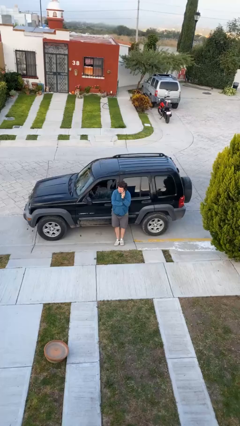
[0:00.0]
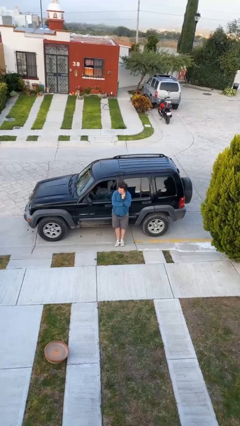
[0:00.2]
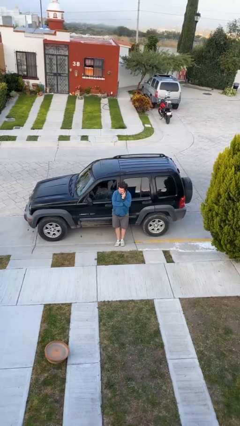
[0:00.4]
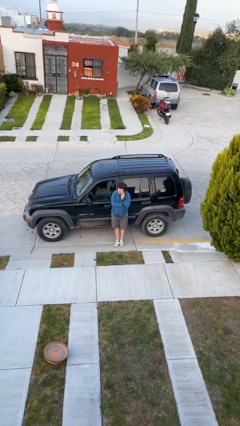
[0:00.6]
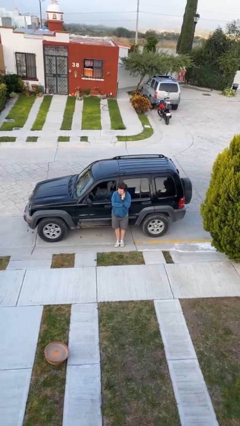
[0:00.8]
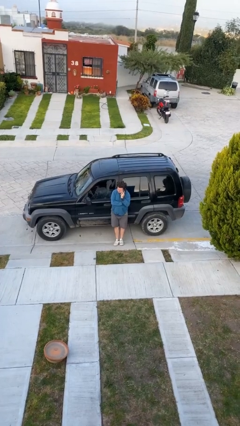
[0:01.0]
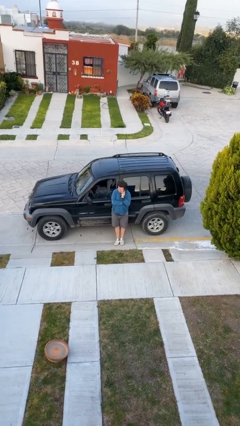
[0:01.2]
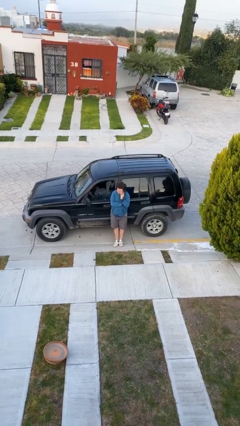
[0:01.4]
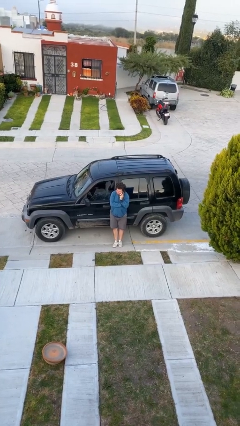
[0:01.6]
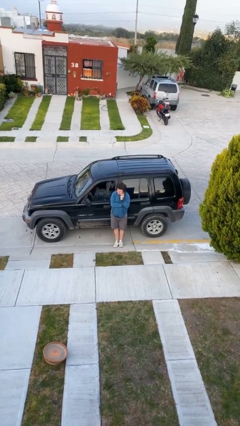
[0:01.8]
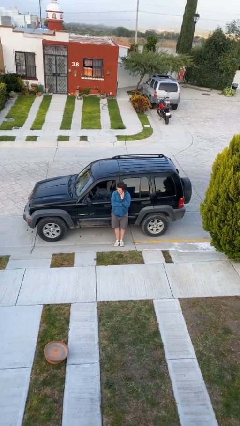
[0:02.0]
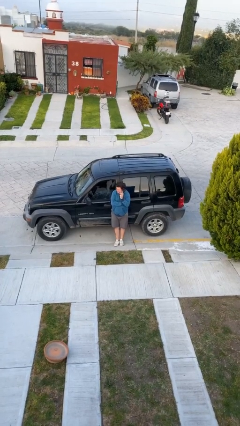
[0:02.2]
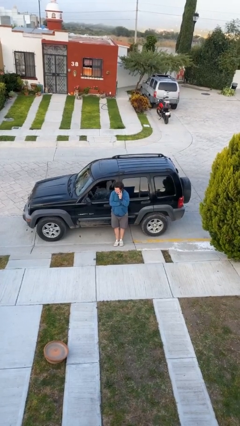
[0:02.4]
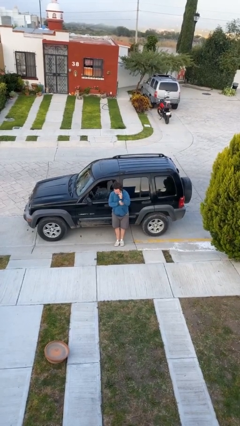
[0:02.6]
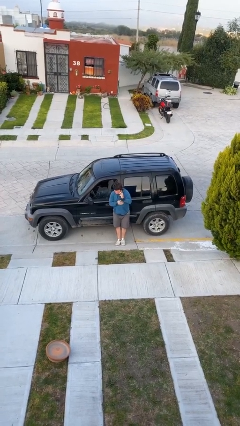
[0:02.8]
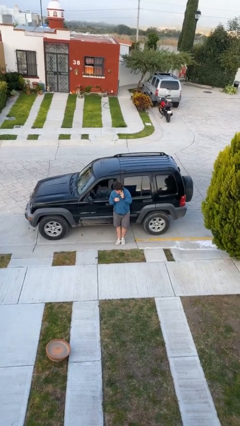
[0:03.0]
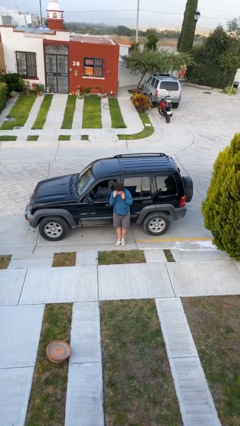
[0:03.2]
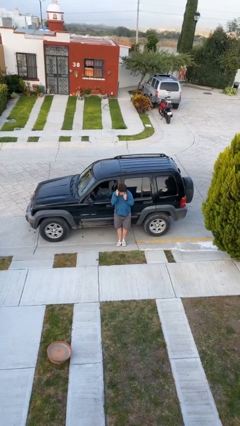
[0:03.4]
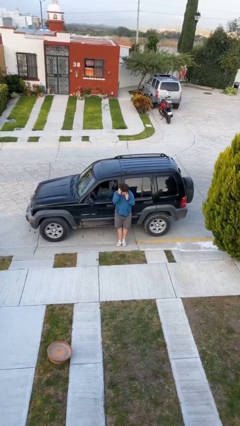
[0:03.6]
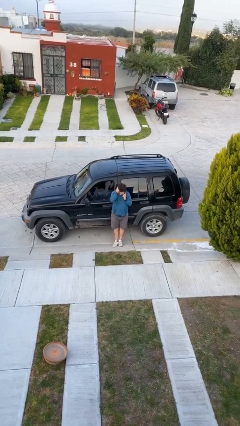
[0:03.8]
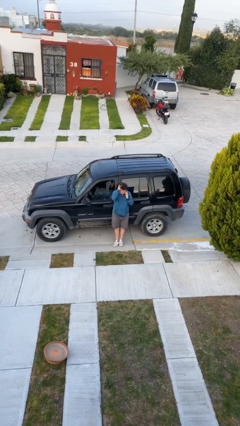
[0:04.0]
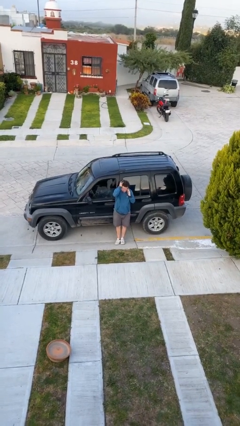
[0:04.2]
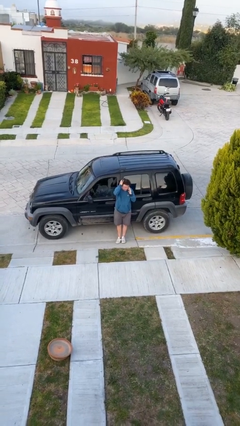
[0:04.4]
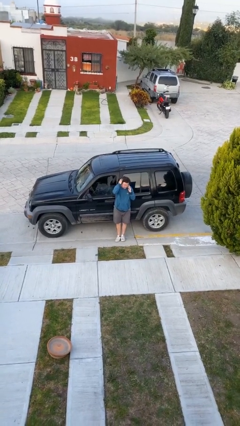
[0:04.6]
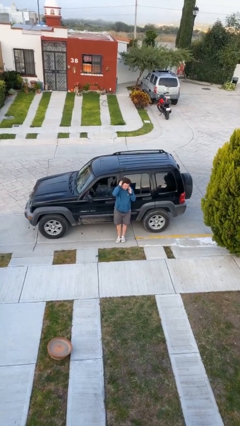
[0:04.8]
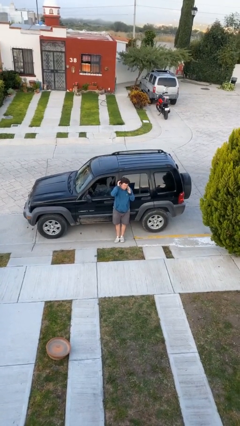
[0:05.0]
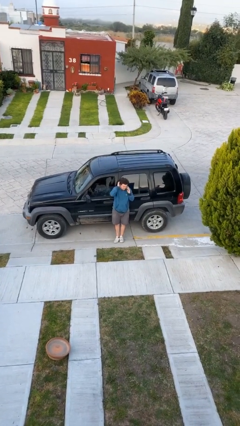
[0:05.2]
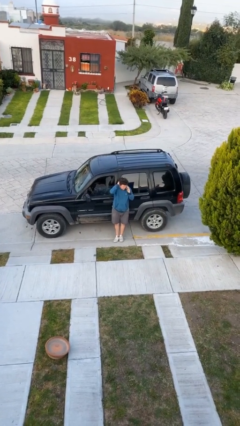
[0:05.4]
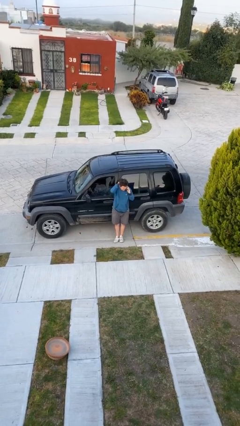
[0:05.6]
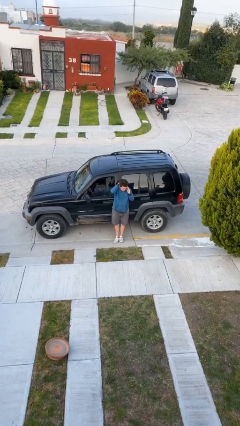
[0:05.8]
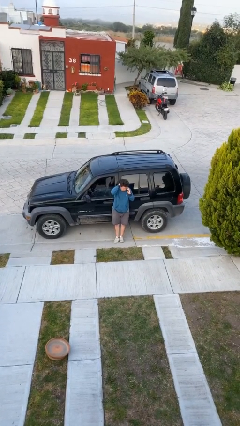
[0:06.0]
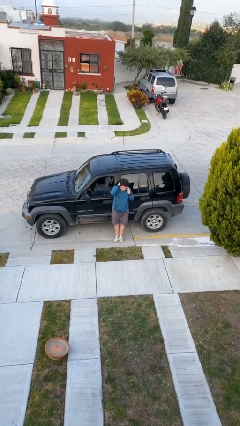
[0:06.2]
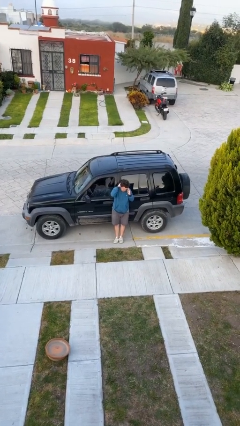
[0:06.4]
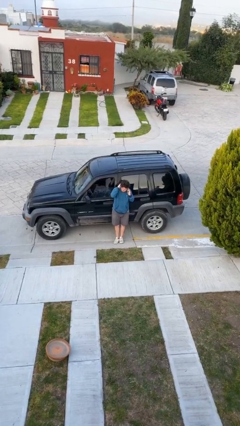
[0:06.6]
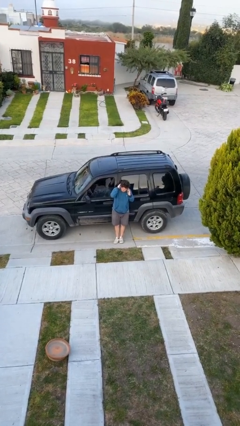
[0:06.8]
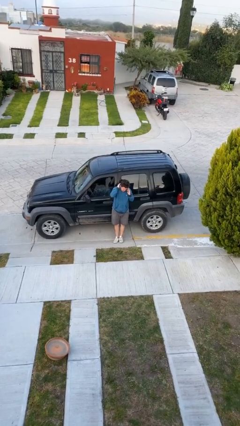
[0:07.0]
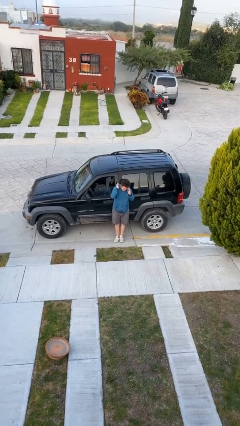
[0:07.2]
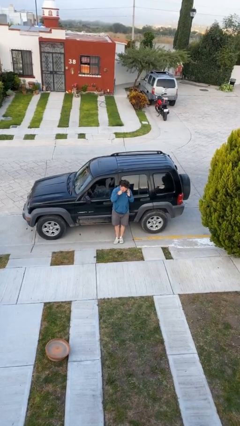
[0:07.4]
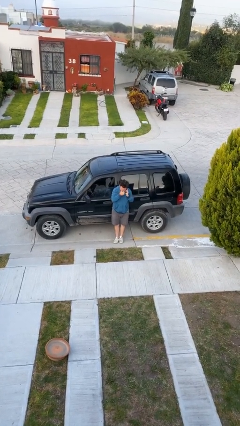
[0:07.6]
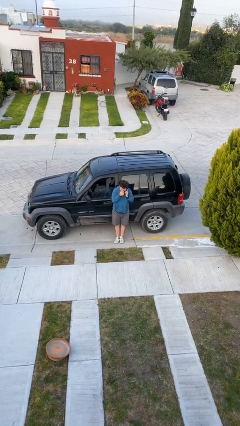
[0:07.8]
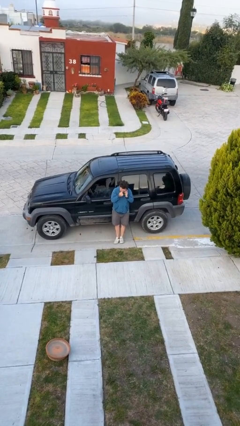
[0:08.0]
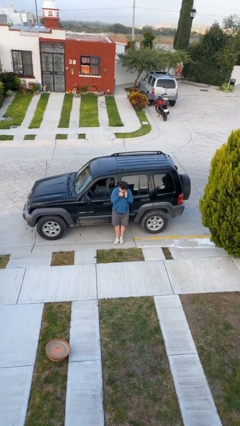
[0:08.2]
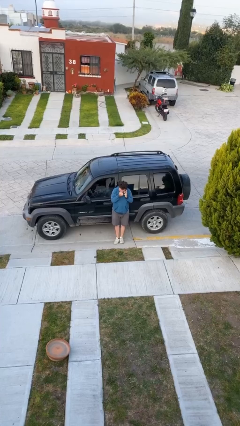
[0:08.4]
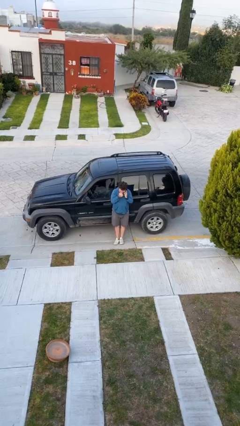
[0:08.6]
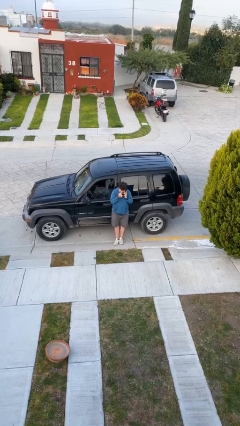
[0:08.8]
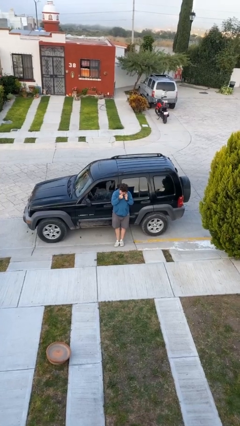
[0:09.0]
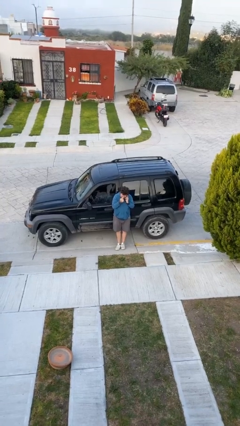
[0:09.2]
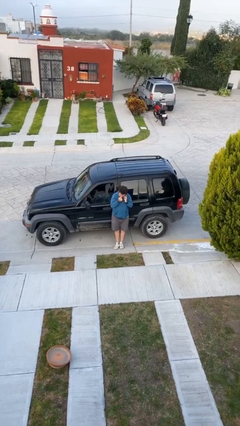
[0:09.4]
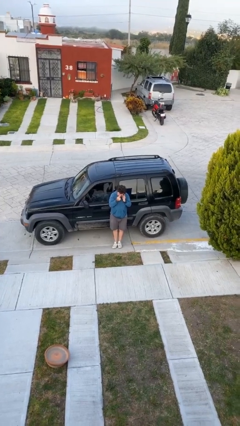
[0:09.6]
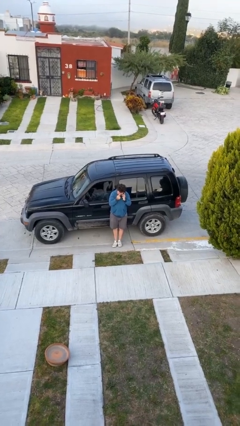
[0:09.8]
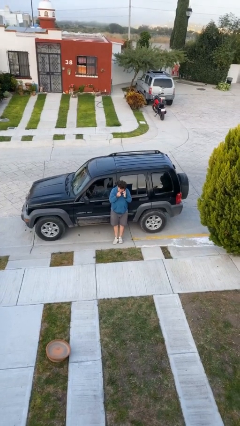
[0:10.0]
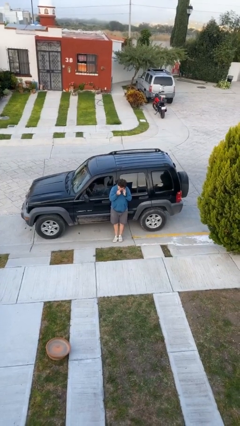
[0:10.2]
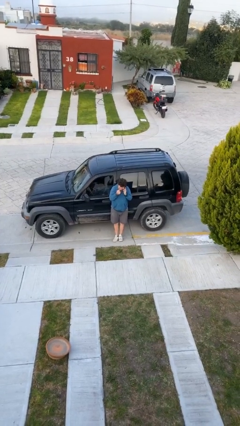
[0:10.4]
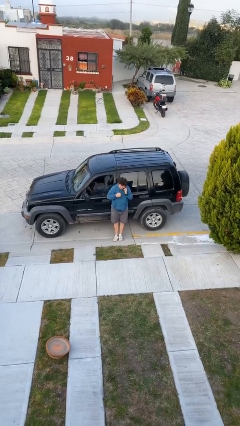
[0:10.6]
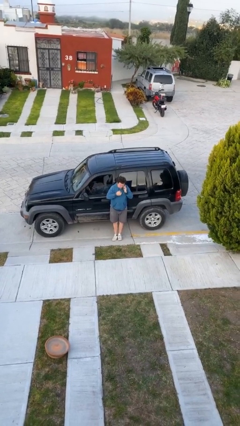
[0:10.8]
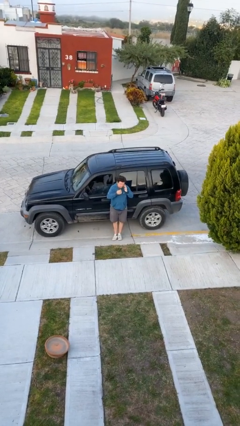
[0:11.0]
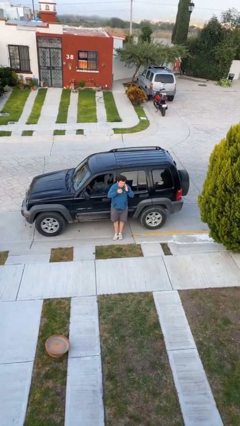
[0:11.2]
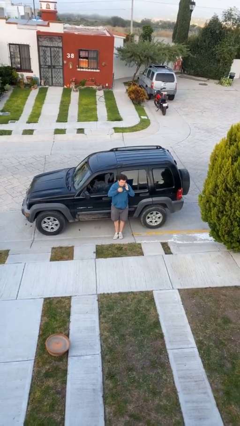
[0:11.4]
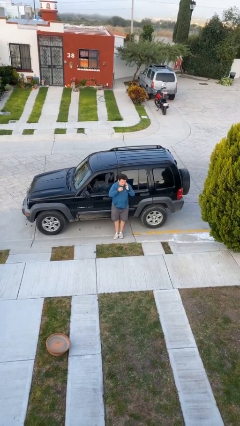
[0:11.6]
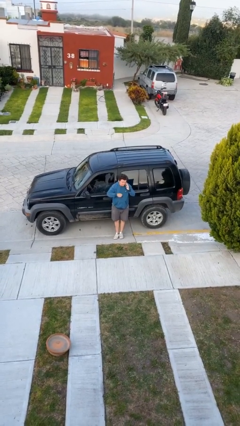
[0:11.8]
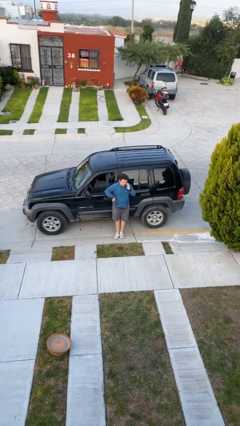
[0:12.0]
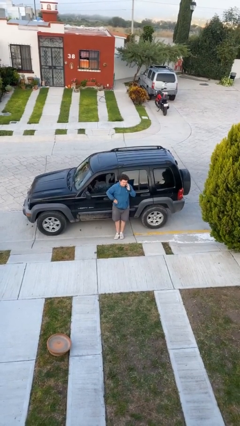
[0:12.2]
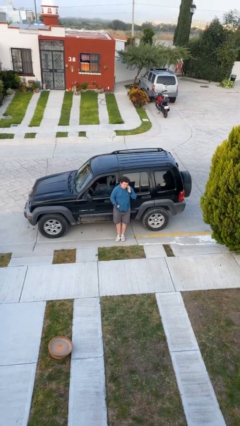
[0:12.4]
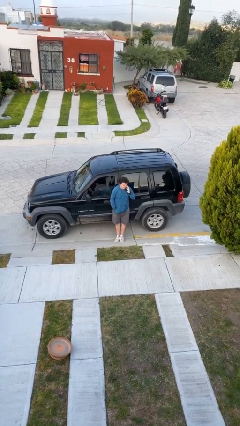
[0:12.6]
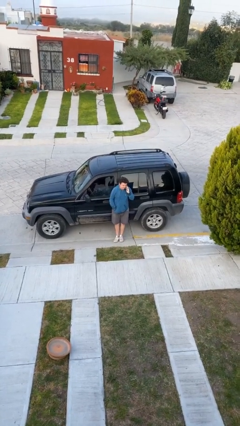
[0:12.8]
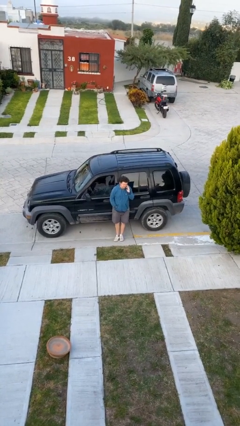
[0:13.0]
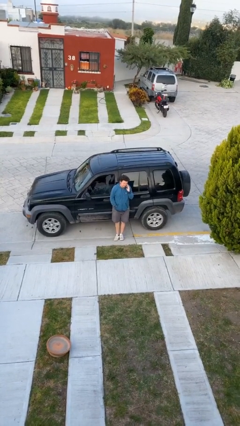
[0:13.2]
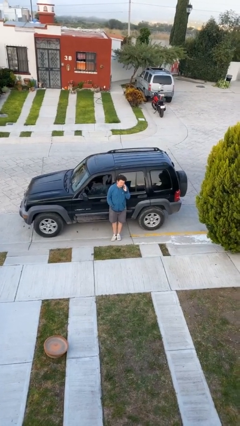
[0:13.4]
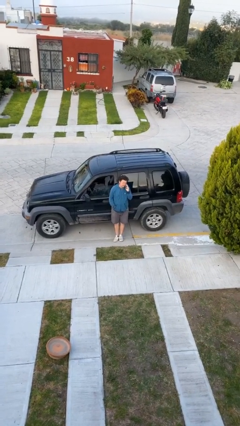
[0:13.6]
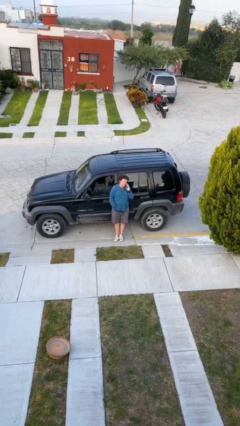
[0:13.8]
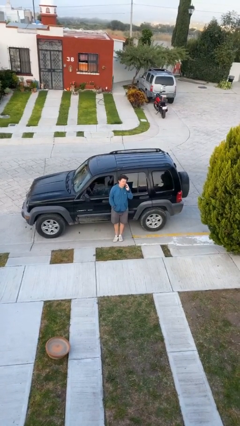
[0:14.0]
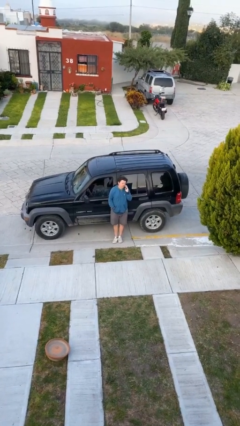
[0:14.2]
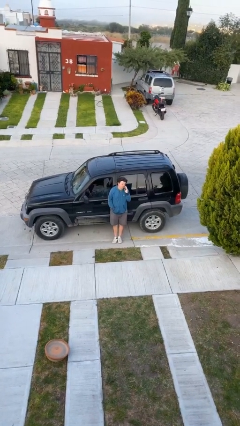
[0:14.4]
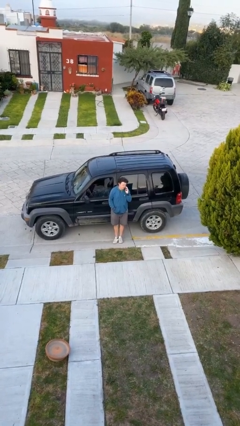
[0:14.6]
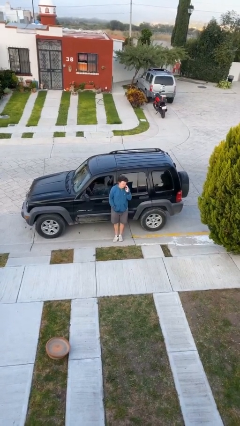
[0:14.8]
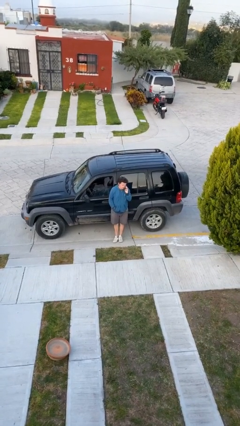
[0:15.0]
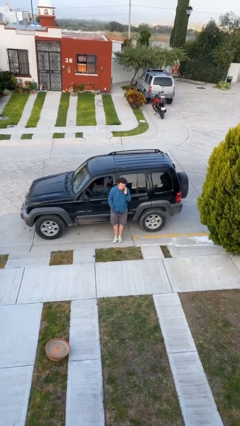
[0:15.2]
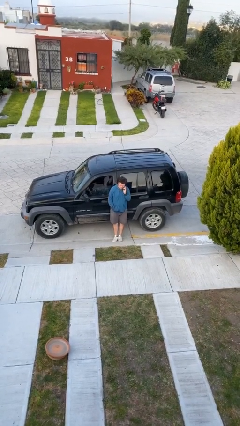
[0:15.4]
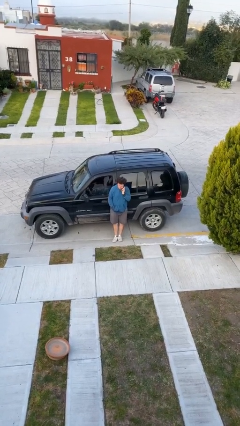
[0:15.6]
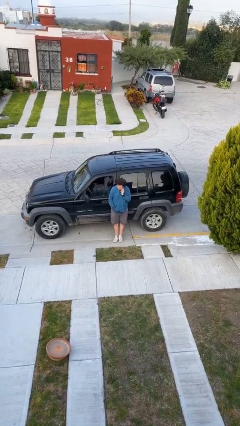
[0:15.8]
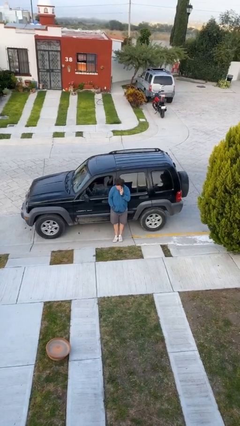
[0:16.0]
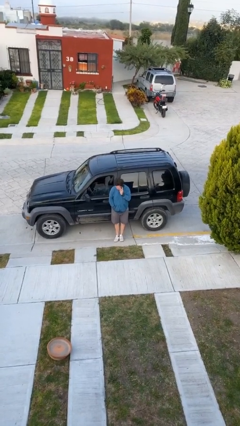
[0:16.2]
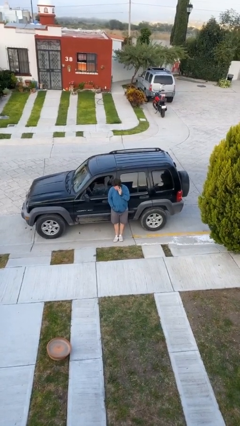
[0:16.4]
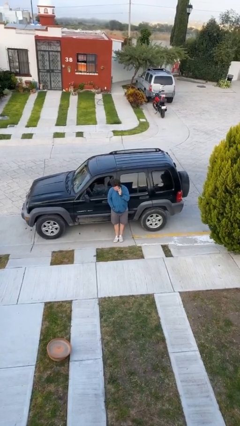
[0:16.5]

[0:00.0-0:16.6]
person talks on phone

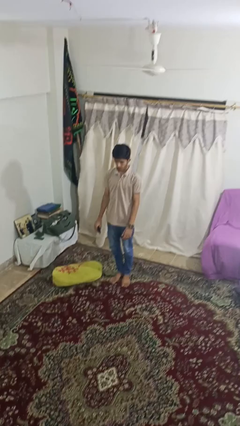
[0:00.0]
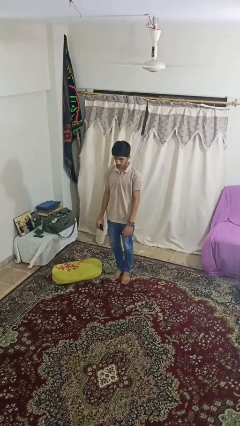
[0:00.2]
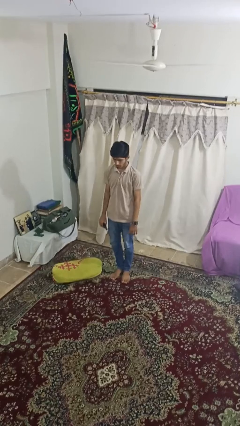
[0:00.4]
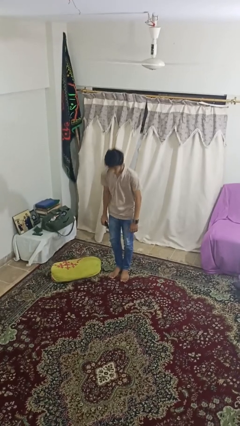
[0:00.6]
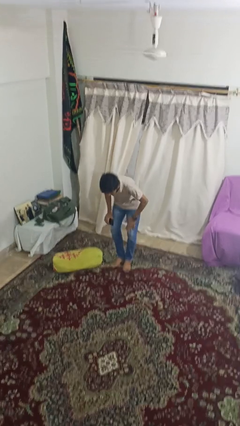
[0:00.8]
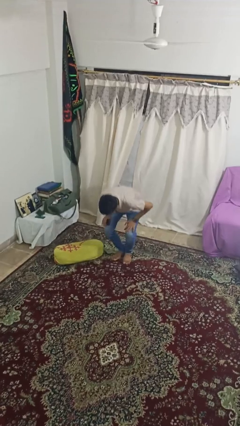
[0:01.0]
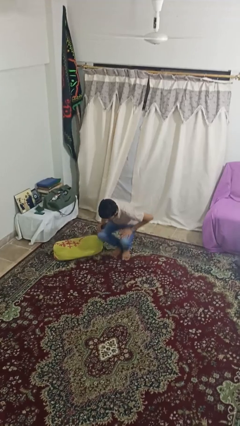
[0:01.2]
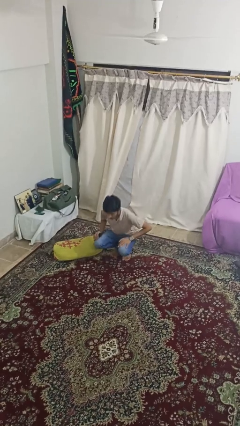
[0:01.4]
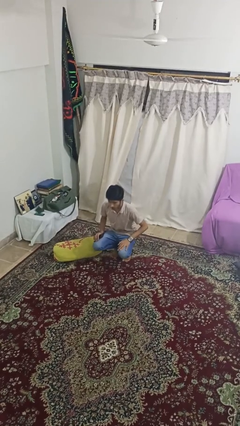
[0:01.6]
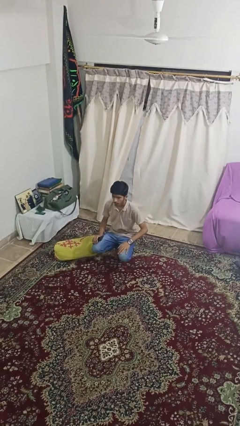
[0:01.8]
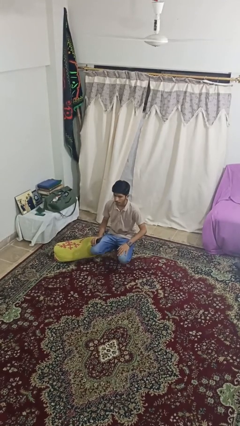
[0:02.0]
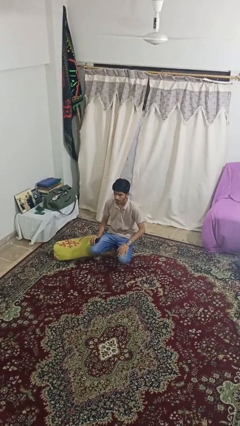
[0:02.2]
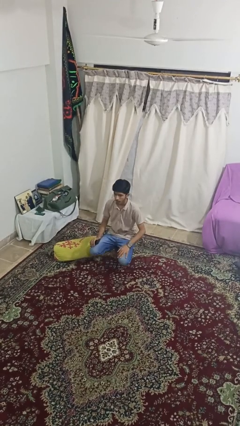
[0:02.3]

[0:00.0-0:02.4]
person squats
